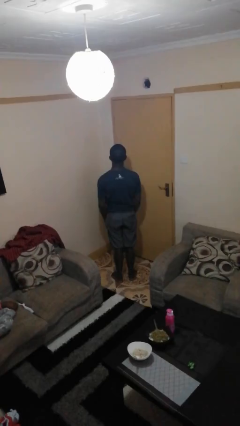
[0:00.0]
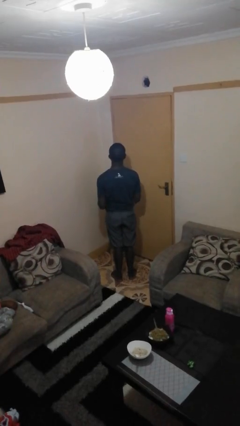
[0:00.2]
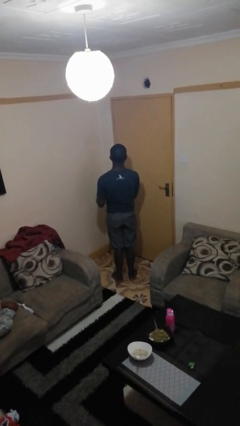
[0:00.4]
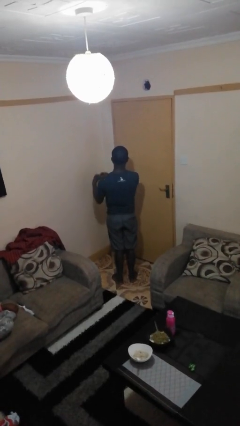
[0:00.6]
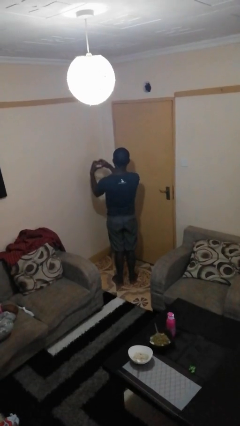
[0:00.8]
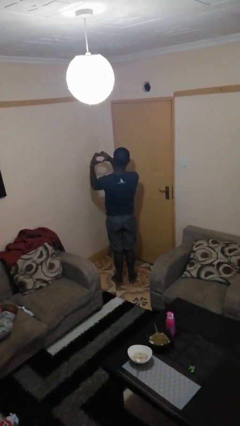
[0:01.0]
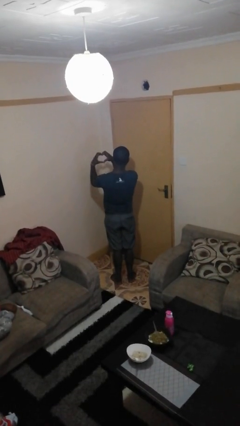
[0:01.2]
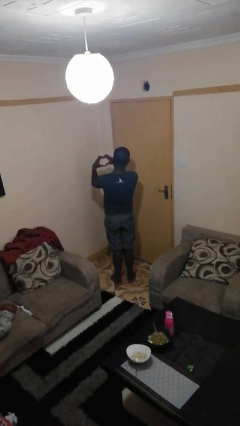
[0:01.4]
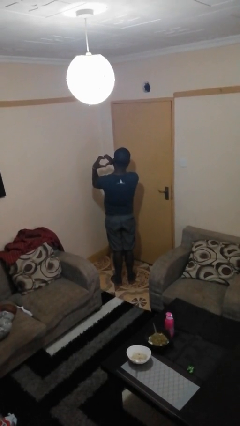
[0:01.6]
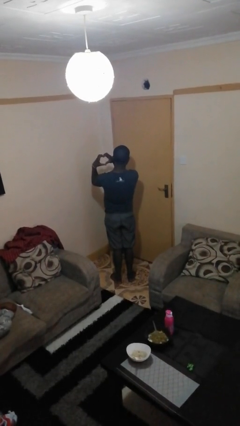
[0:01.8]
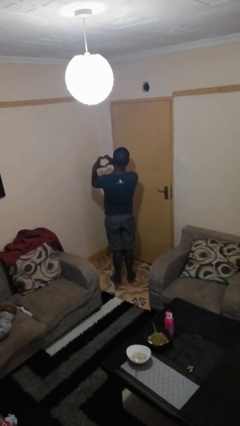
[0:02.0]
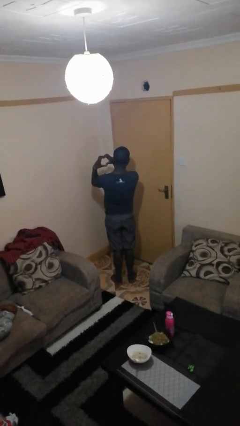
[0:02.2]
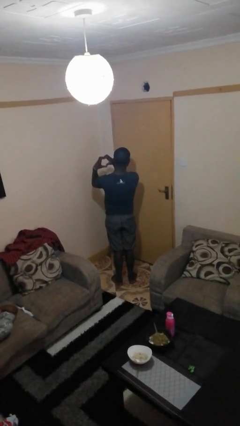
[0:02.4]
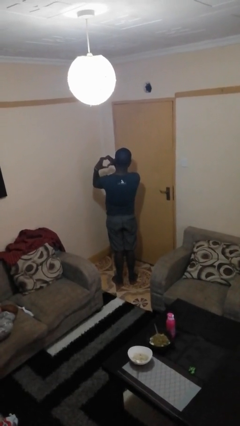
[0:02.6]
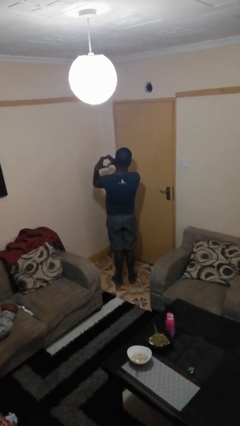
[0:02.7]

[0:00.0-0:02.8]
person gestures heart

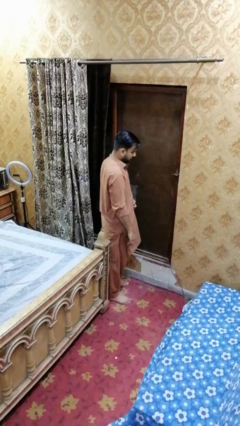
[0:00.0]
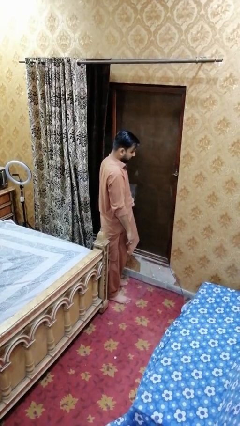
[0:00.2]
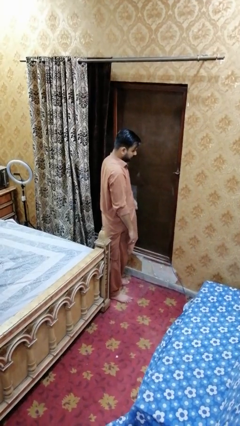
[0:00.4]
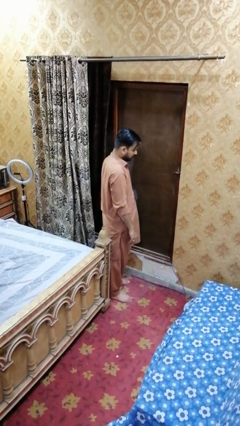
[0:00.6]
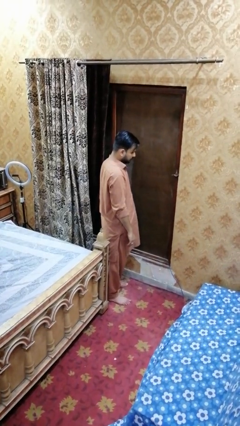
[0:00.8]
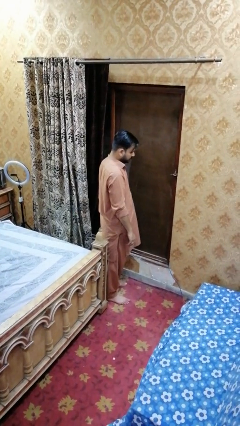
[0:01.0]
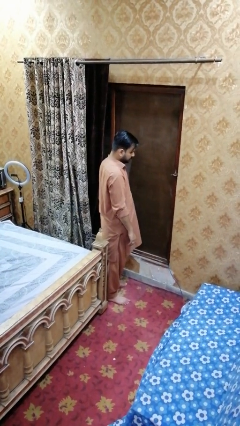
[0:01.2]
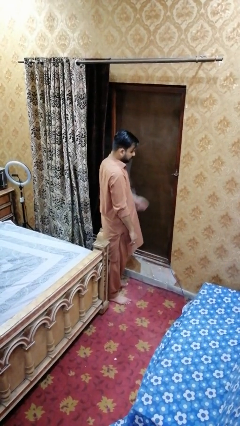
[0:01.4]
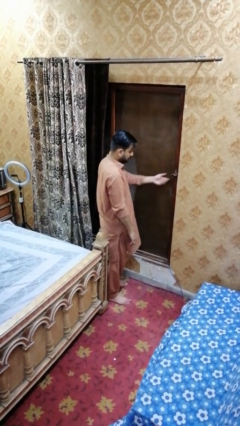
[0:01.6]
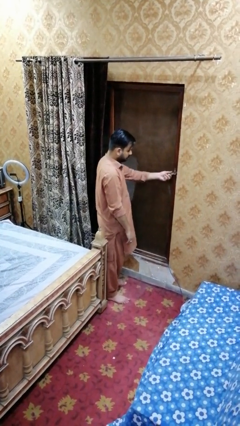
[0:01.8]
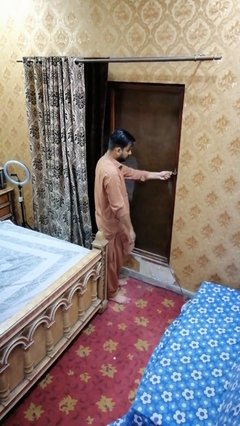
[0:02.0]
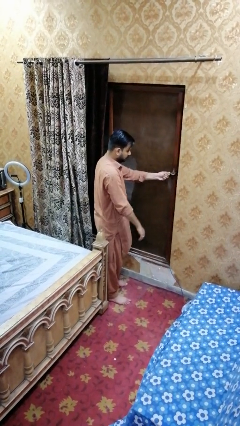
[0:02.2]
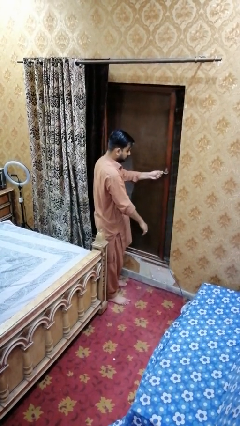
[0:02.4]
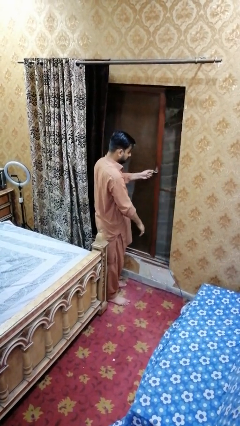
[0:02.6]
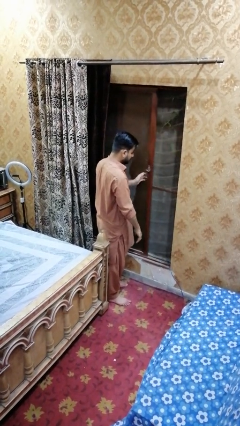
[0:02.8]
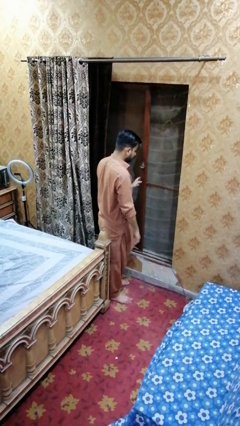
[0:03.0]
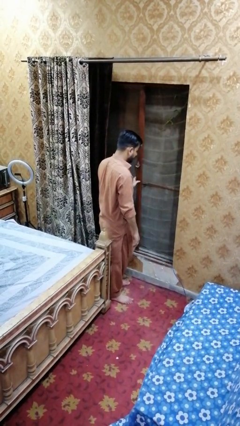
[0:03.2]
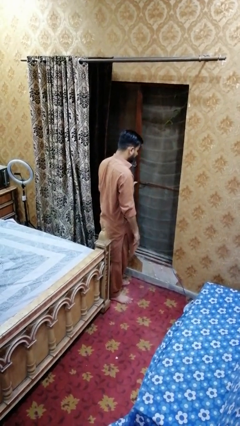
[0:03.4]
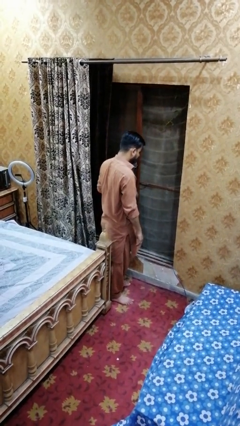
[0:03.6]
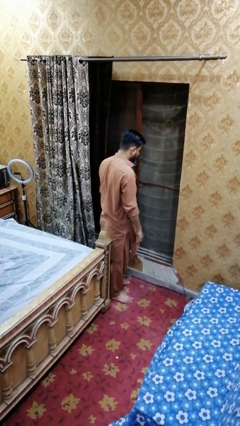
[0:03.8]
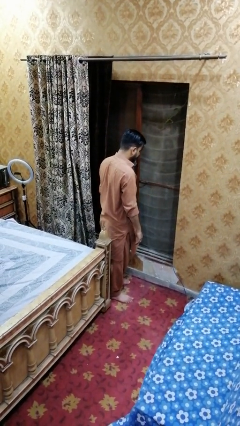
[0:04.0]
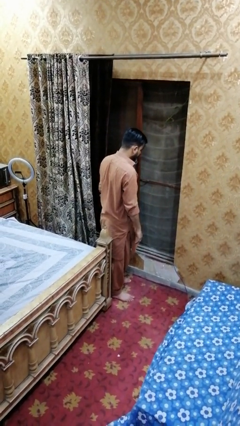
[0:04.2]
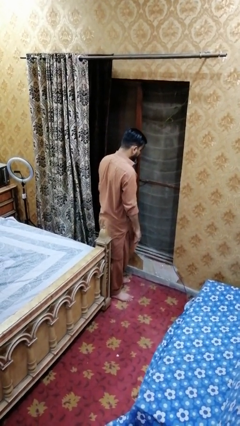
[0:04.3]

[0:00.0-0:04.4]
person opens home window

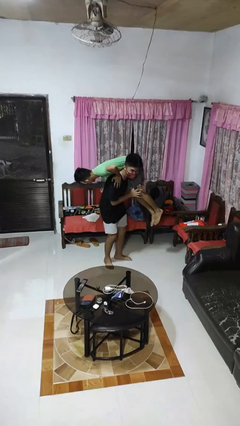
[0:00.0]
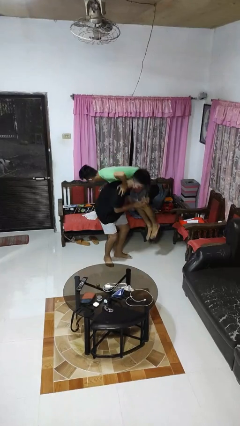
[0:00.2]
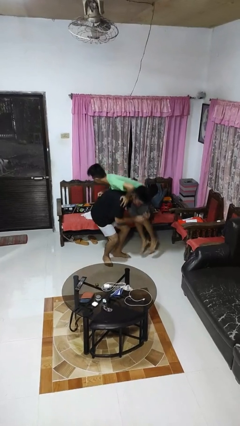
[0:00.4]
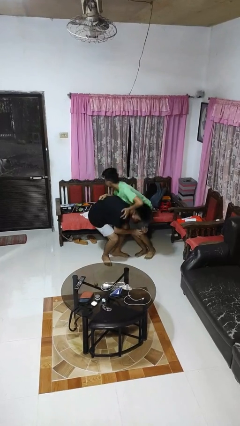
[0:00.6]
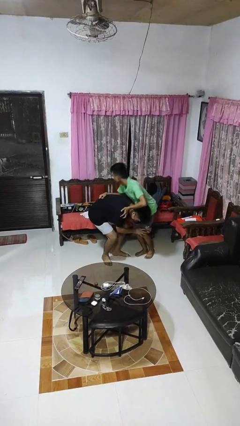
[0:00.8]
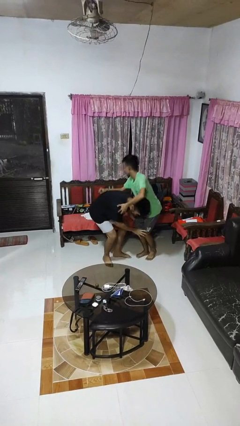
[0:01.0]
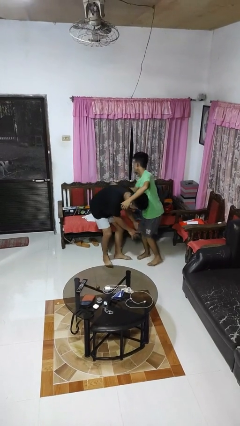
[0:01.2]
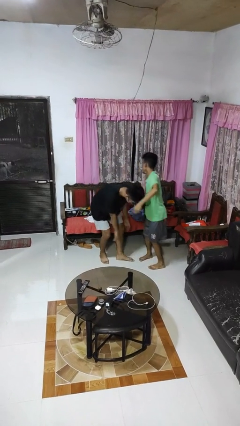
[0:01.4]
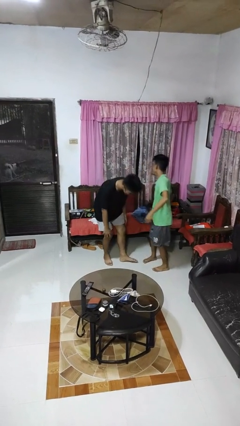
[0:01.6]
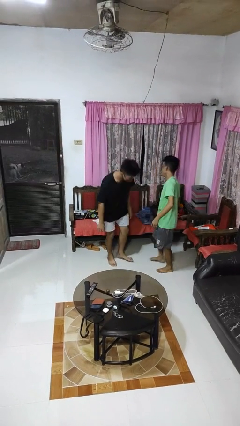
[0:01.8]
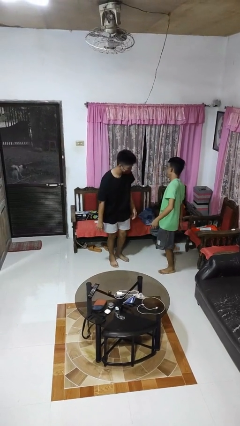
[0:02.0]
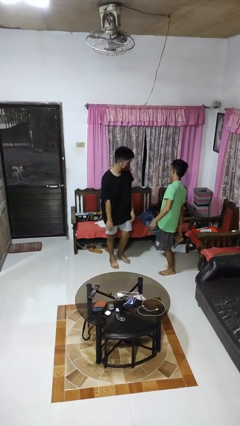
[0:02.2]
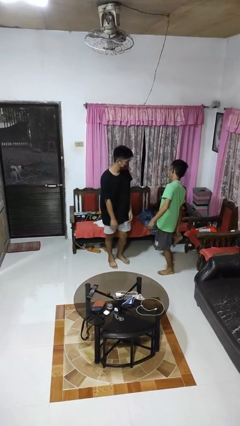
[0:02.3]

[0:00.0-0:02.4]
person puts down person

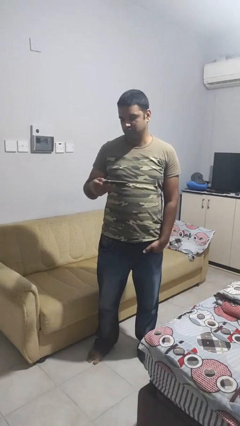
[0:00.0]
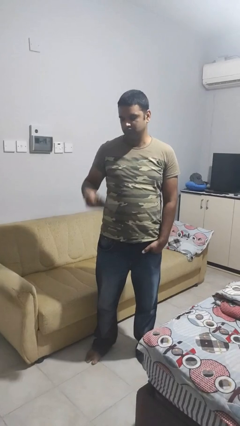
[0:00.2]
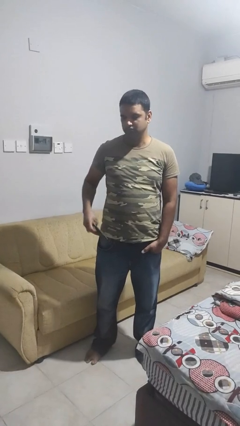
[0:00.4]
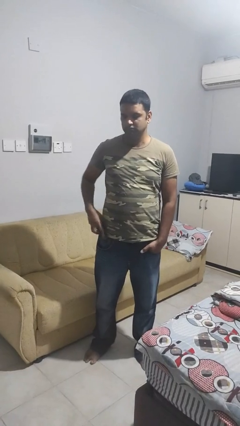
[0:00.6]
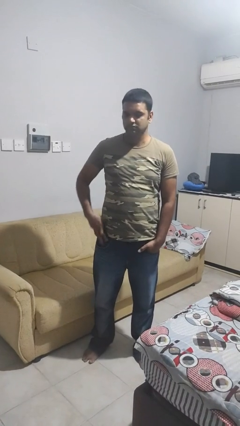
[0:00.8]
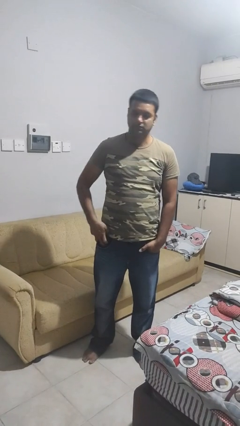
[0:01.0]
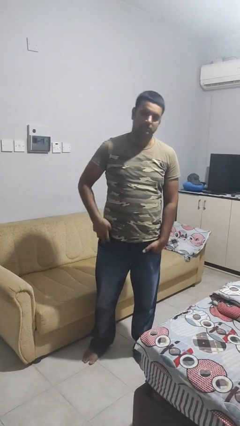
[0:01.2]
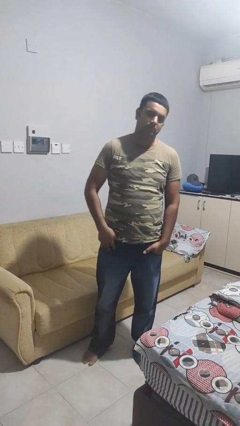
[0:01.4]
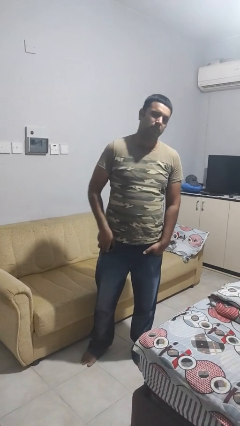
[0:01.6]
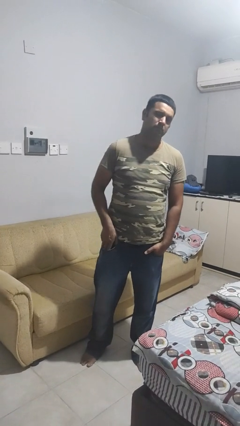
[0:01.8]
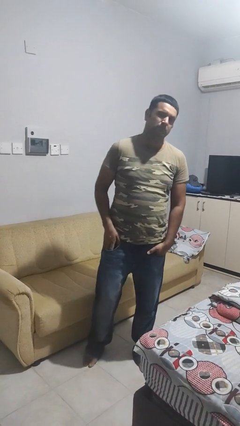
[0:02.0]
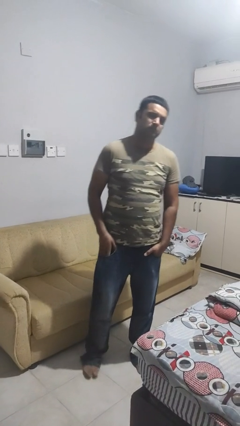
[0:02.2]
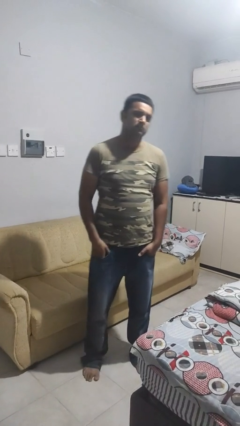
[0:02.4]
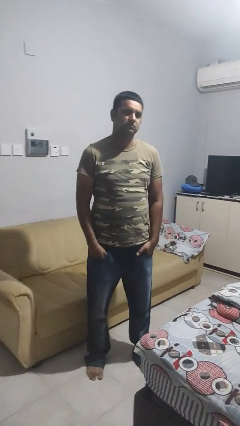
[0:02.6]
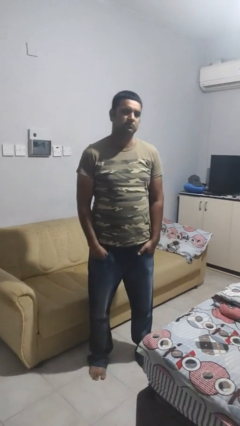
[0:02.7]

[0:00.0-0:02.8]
person puts phone into pocket

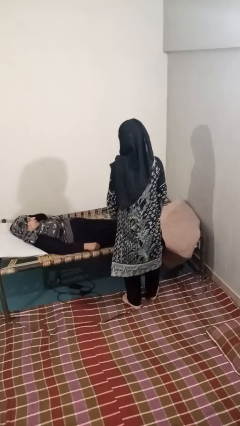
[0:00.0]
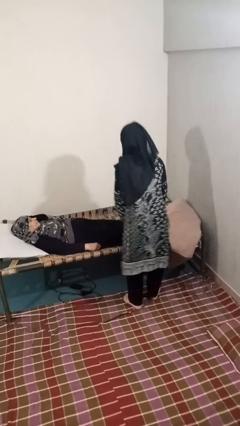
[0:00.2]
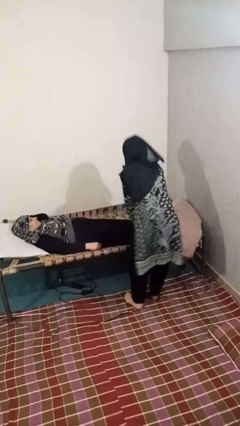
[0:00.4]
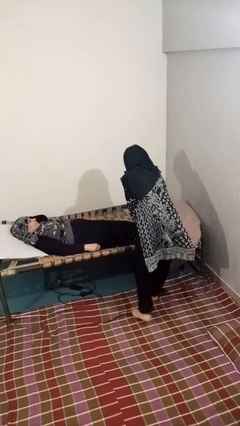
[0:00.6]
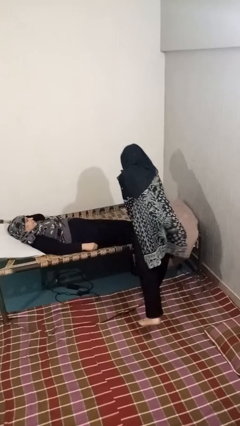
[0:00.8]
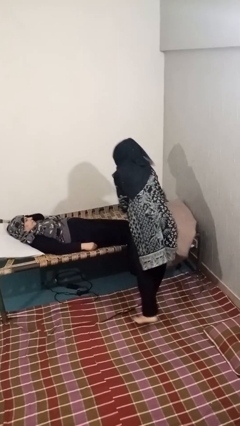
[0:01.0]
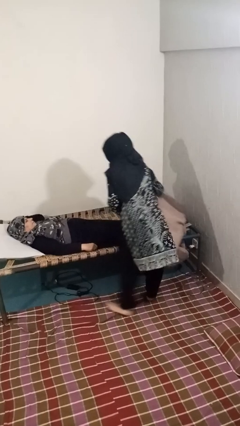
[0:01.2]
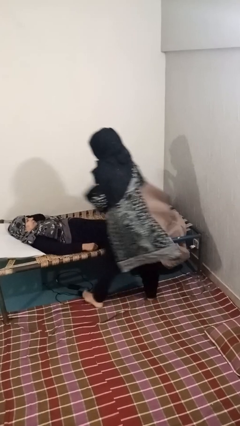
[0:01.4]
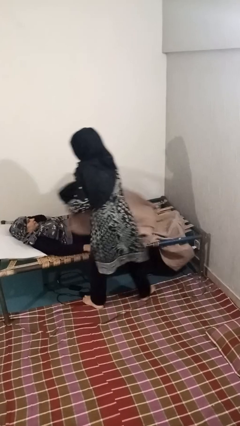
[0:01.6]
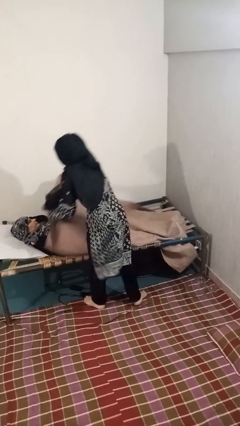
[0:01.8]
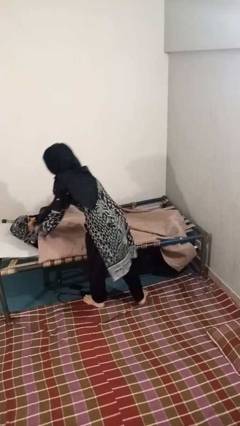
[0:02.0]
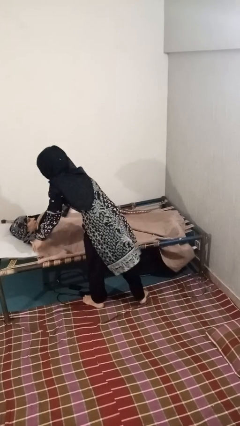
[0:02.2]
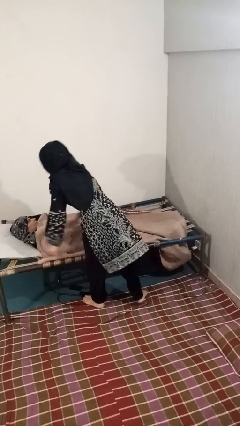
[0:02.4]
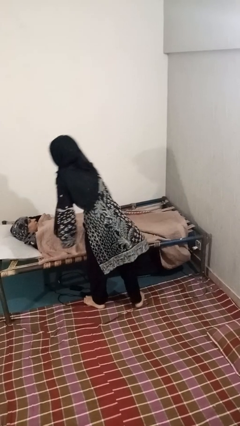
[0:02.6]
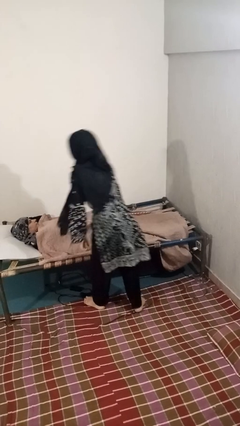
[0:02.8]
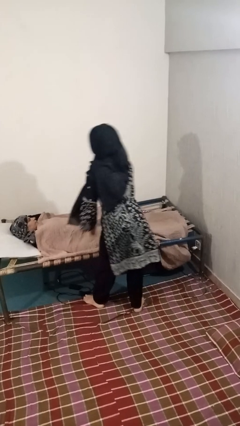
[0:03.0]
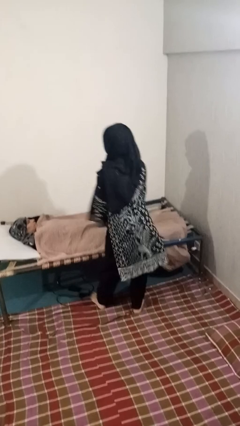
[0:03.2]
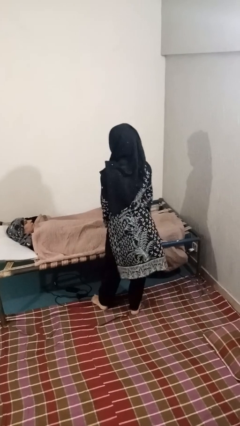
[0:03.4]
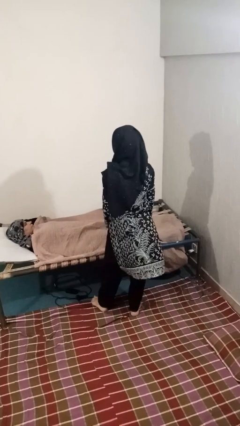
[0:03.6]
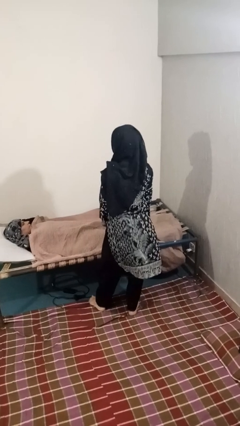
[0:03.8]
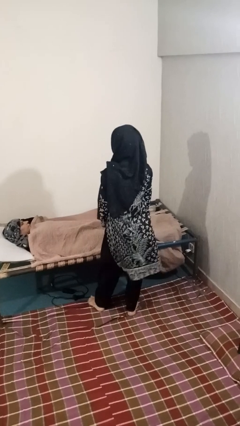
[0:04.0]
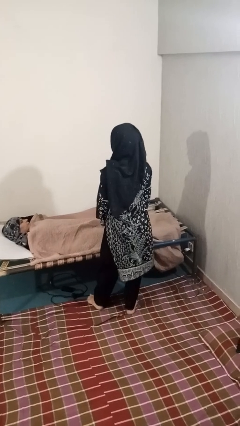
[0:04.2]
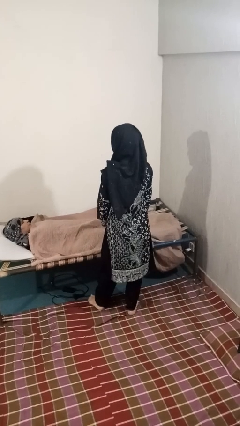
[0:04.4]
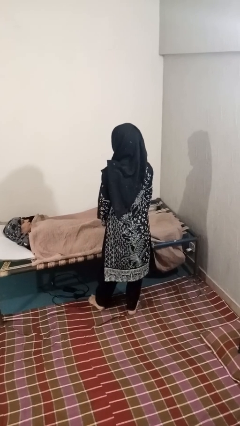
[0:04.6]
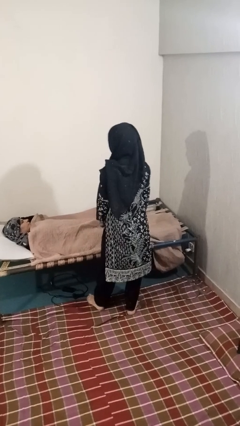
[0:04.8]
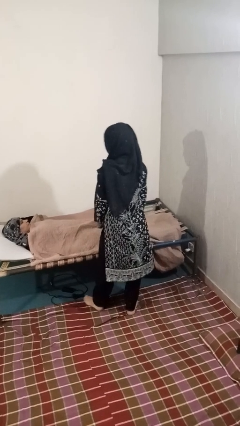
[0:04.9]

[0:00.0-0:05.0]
person covers friend with blanket
